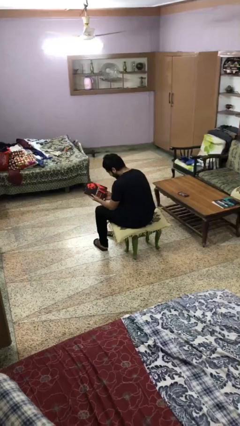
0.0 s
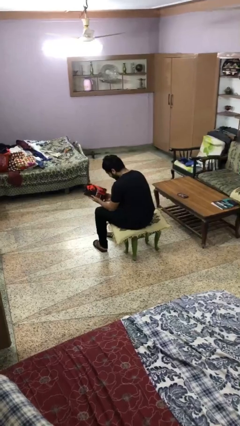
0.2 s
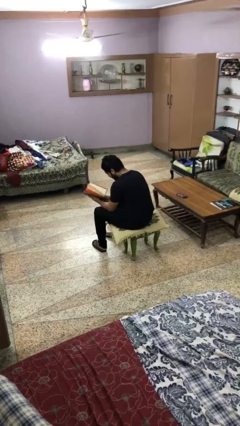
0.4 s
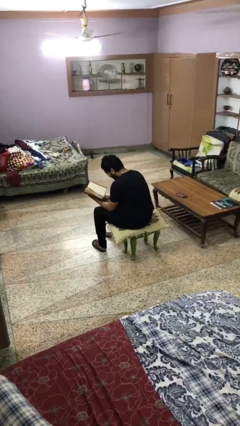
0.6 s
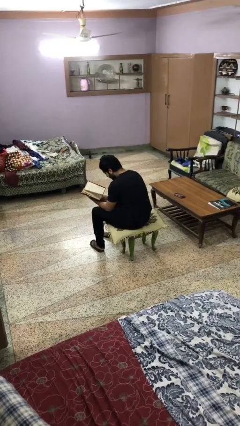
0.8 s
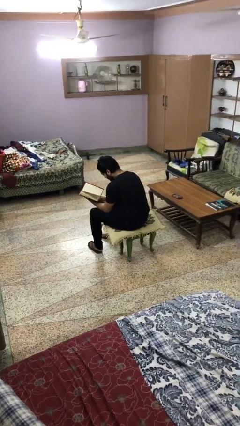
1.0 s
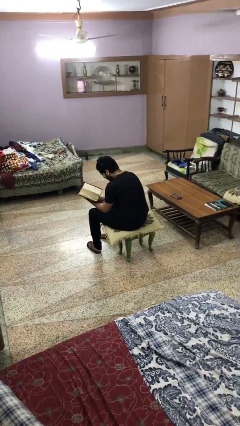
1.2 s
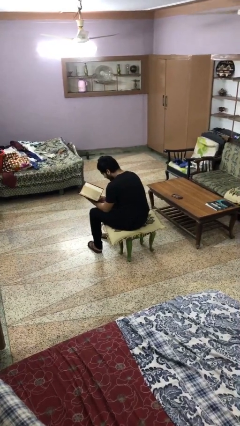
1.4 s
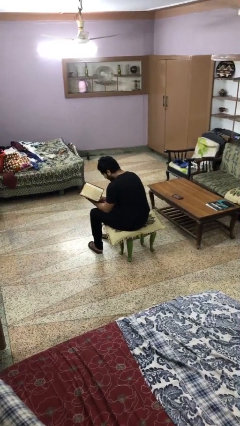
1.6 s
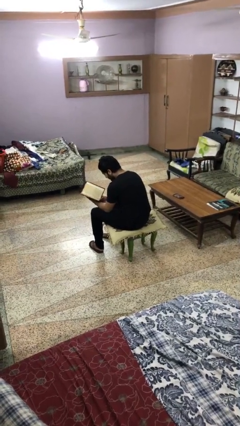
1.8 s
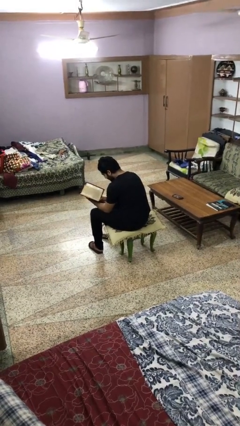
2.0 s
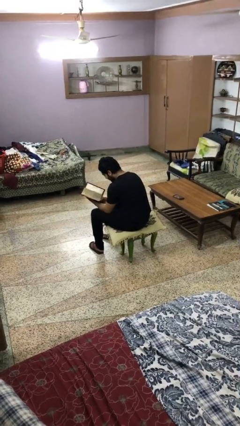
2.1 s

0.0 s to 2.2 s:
person reads magazine

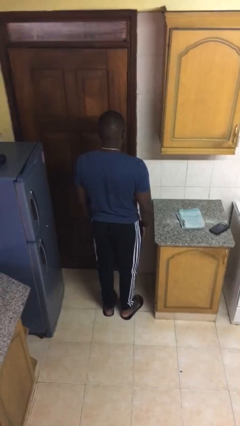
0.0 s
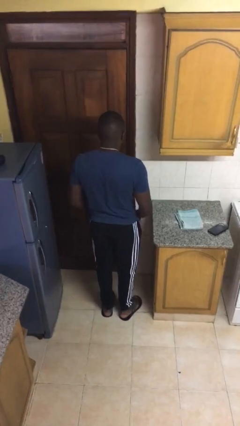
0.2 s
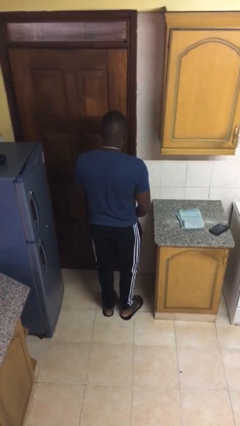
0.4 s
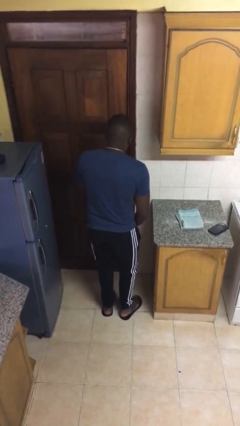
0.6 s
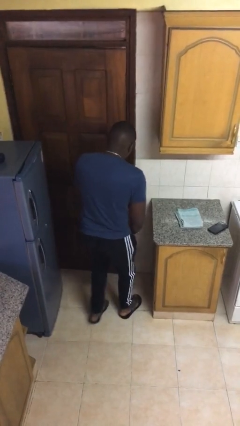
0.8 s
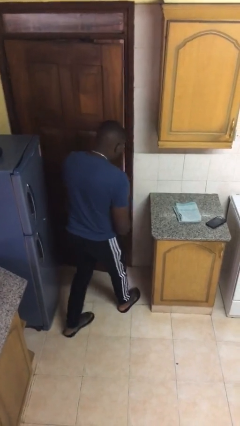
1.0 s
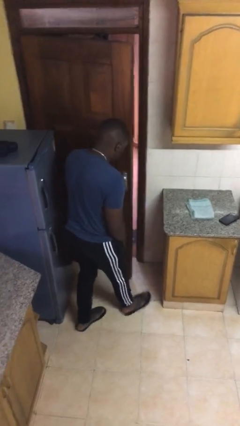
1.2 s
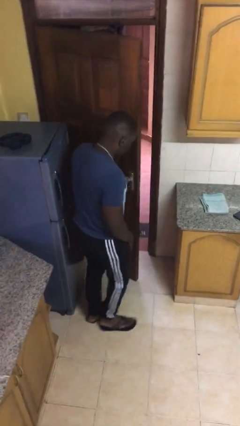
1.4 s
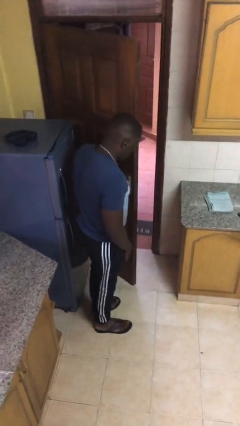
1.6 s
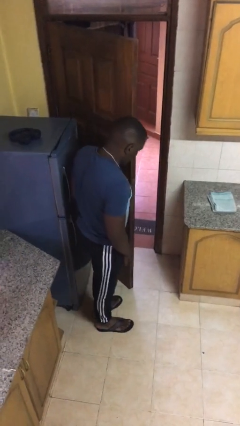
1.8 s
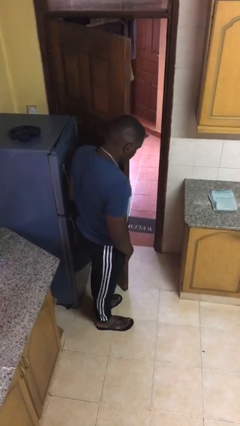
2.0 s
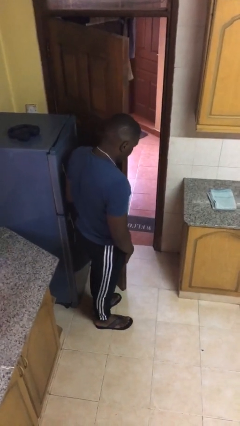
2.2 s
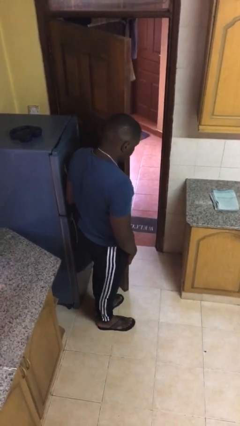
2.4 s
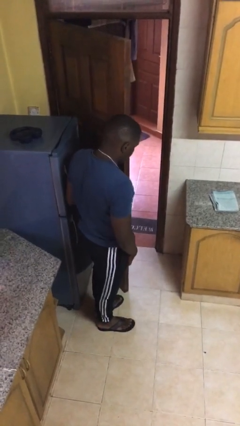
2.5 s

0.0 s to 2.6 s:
person opens facility door

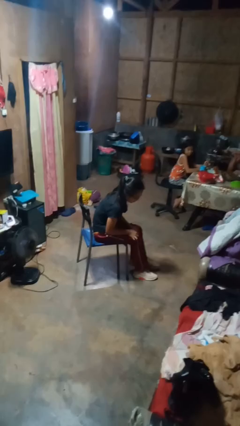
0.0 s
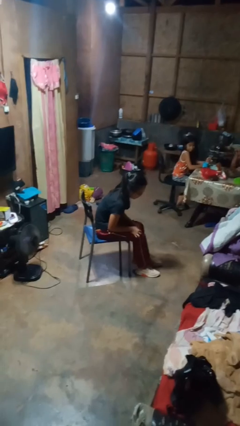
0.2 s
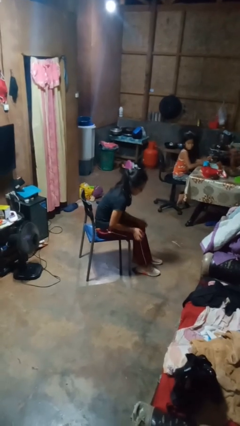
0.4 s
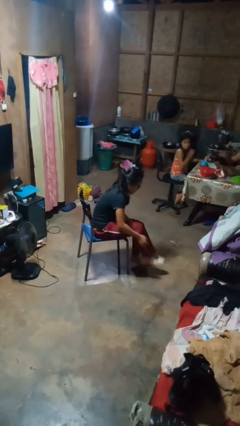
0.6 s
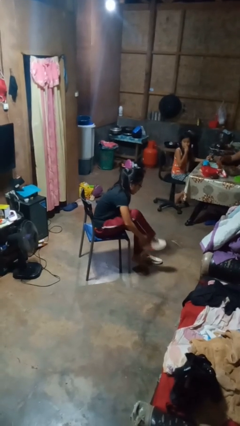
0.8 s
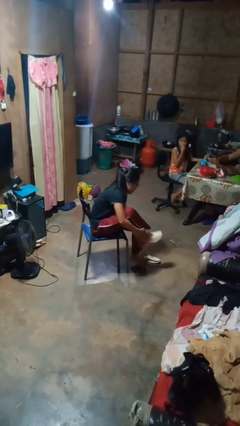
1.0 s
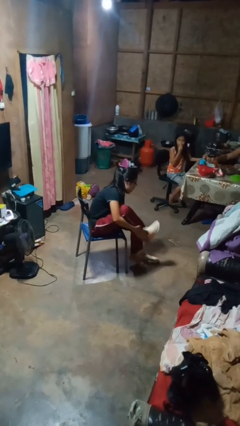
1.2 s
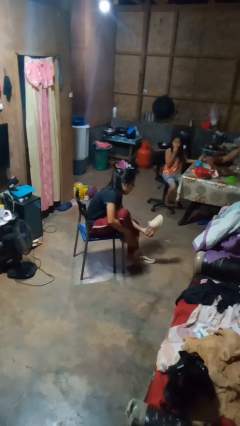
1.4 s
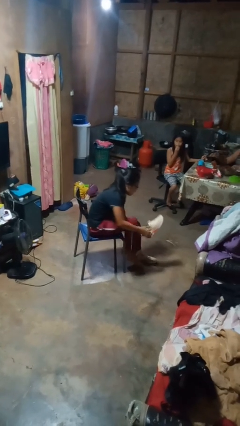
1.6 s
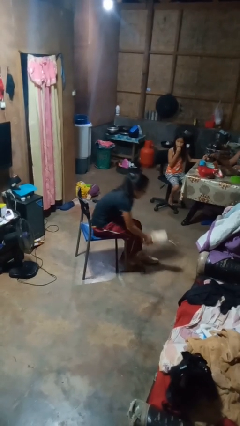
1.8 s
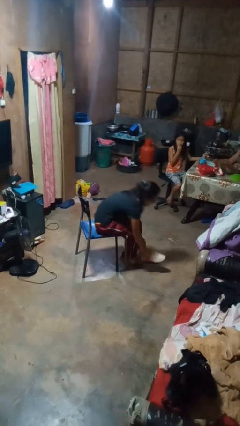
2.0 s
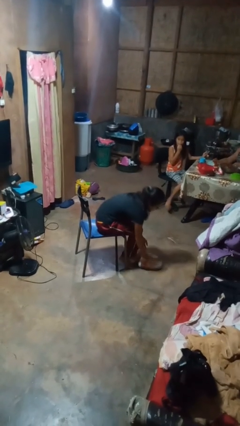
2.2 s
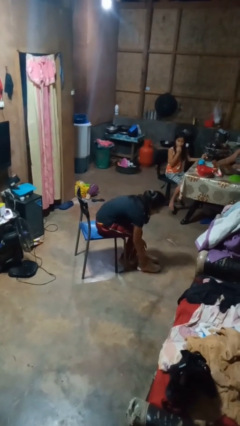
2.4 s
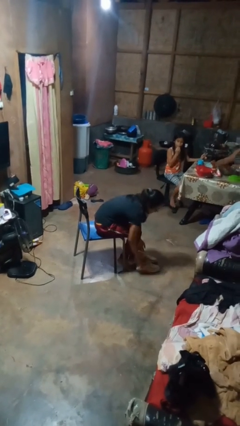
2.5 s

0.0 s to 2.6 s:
person takes off shoes

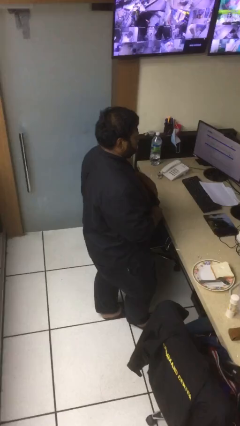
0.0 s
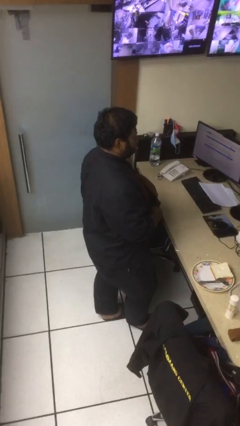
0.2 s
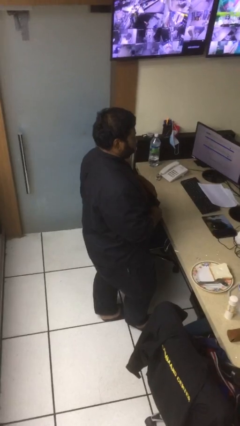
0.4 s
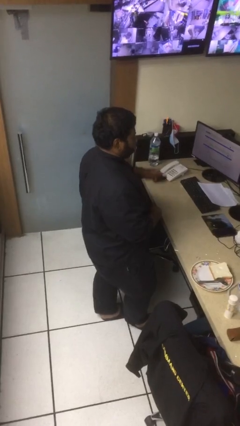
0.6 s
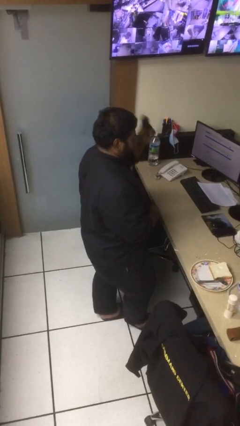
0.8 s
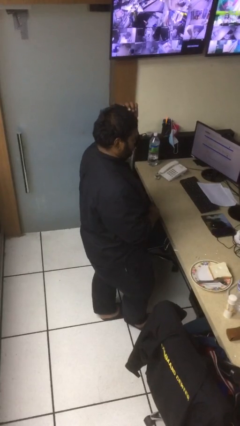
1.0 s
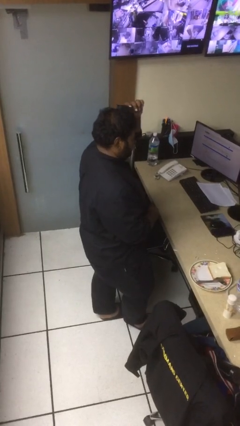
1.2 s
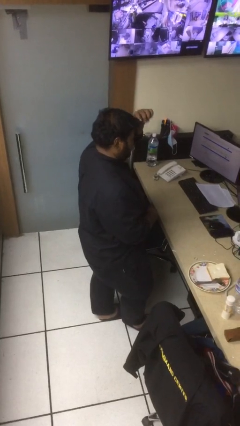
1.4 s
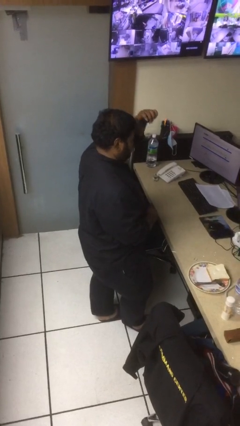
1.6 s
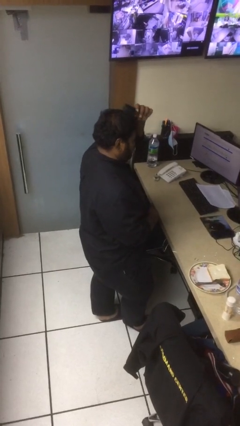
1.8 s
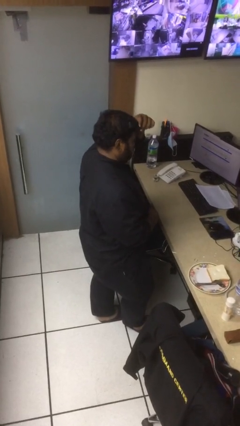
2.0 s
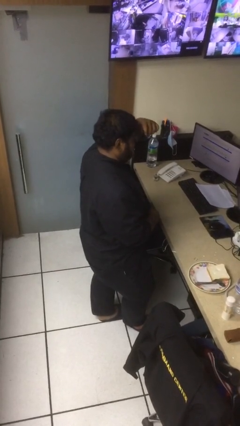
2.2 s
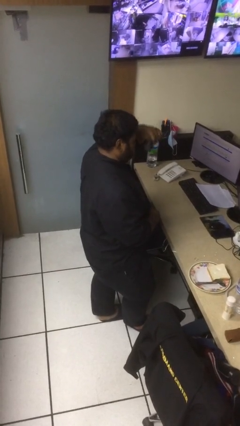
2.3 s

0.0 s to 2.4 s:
person brushes hair

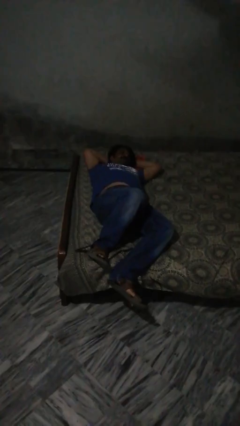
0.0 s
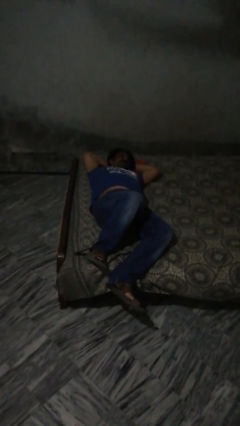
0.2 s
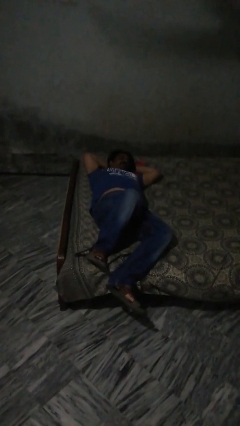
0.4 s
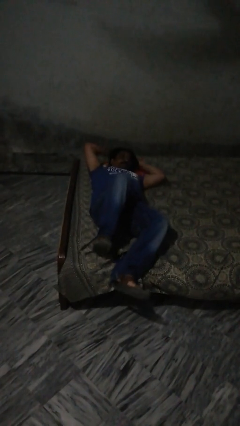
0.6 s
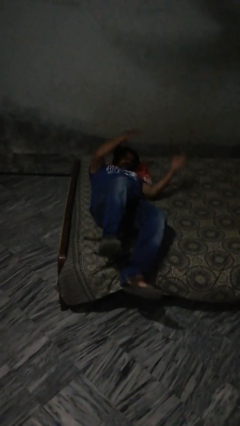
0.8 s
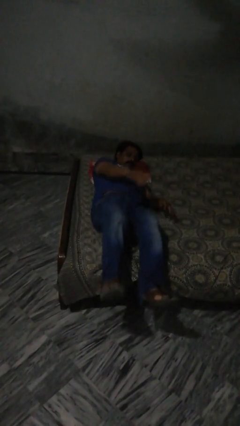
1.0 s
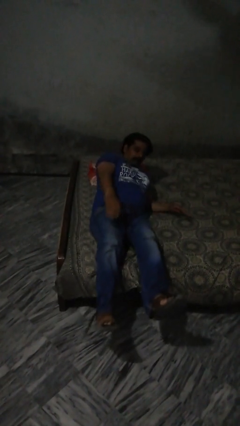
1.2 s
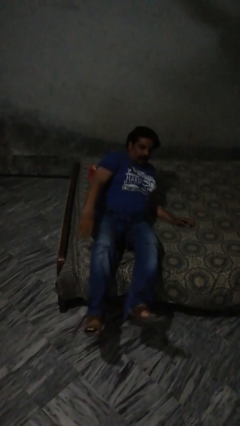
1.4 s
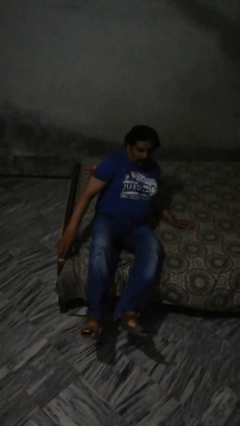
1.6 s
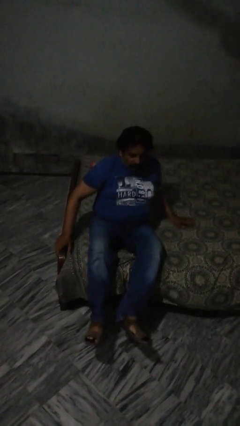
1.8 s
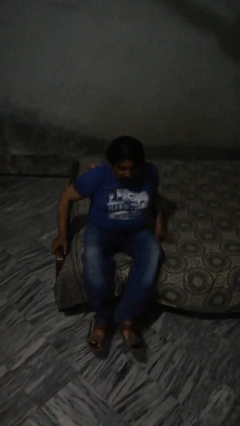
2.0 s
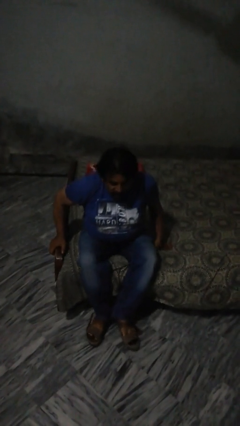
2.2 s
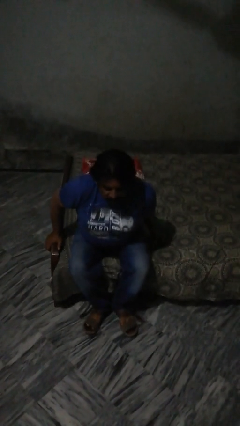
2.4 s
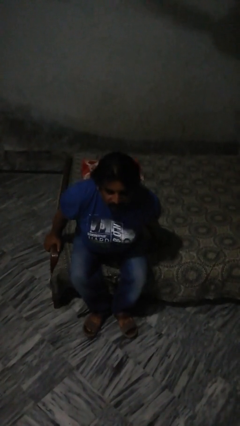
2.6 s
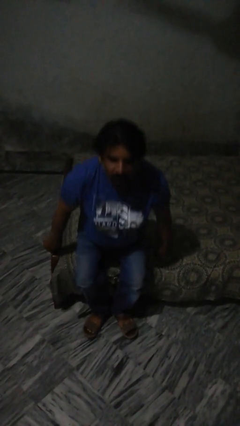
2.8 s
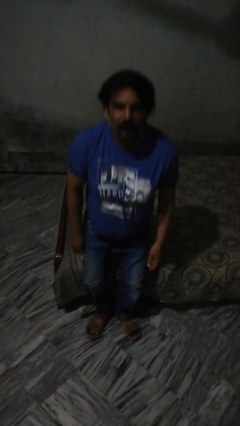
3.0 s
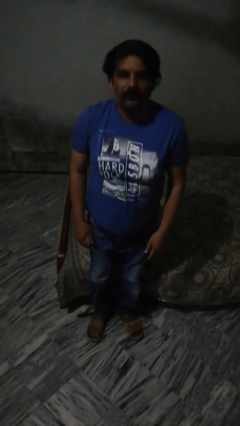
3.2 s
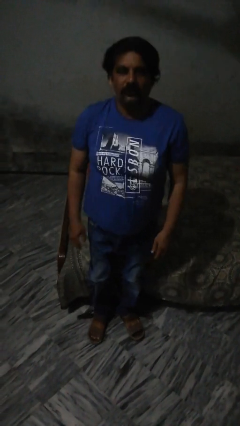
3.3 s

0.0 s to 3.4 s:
person stands up

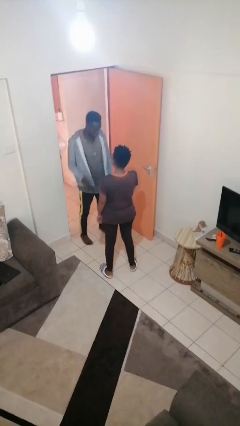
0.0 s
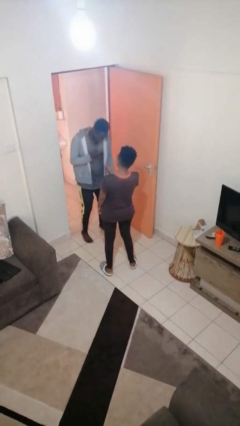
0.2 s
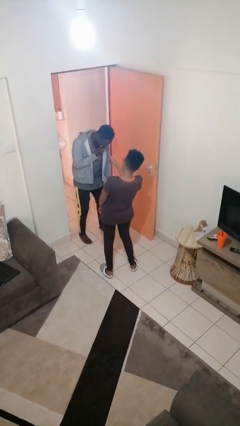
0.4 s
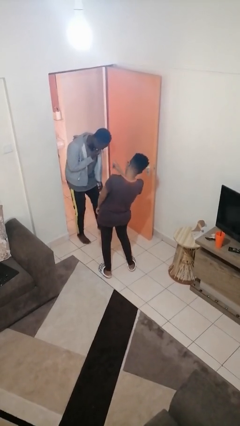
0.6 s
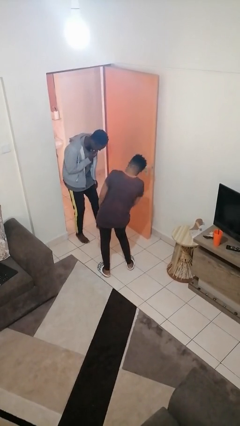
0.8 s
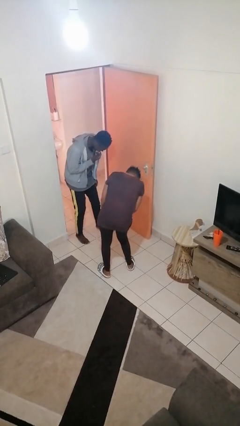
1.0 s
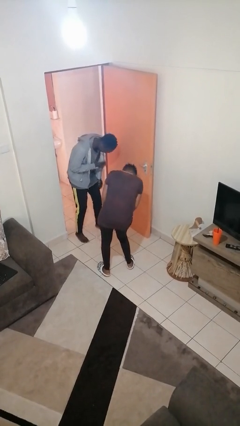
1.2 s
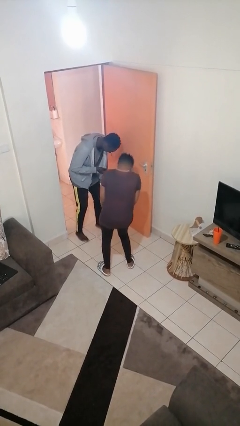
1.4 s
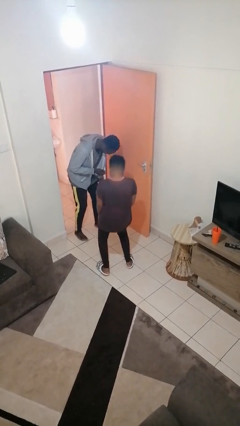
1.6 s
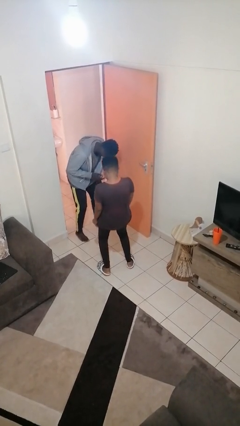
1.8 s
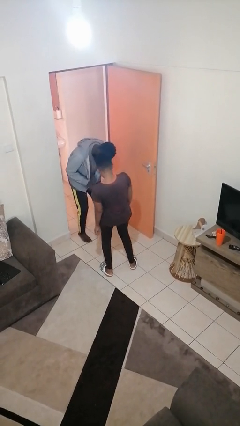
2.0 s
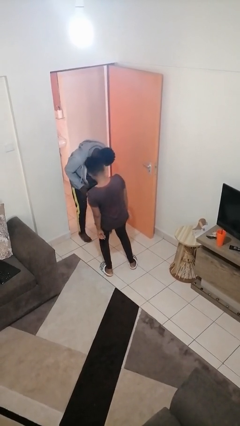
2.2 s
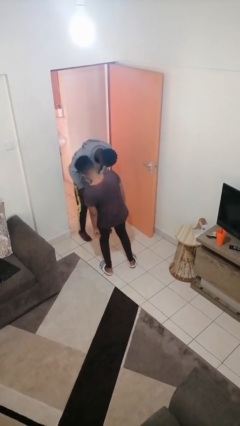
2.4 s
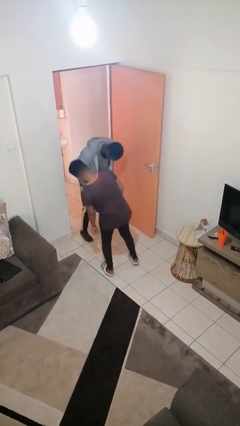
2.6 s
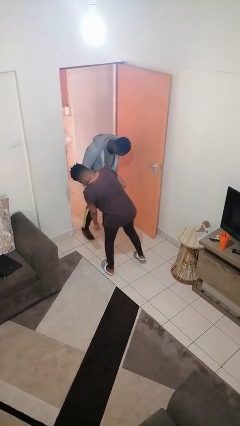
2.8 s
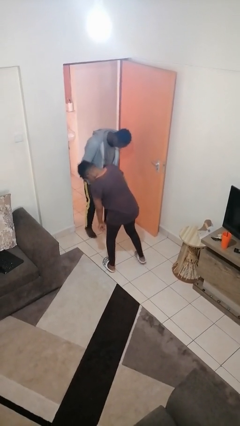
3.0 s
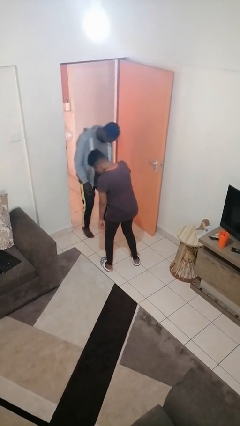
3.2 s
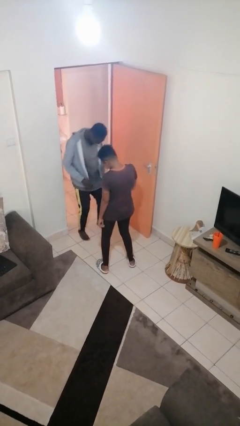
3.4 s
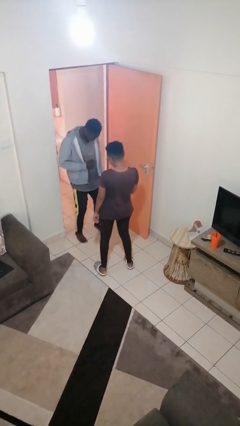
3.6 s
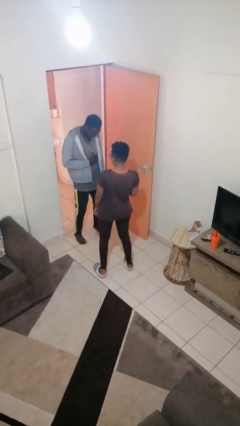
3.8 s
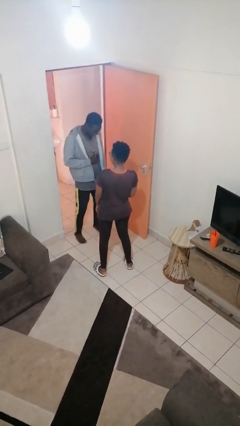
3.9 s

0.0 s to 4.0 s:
person laughs with person

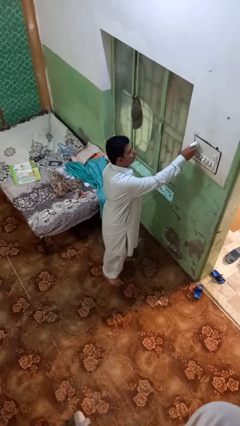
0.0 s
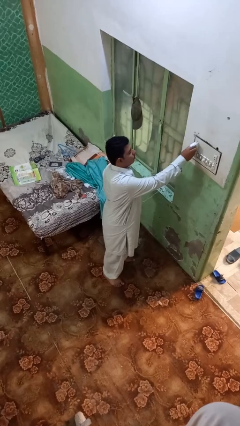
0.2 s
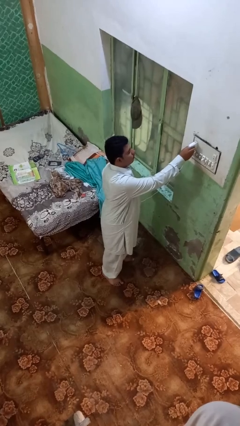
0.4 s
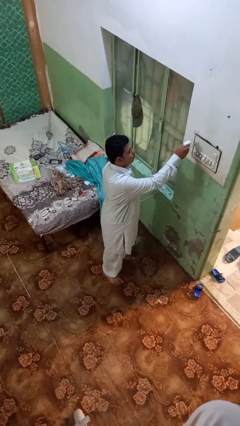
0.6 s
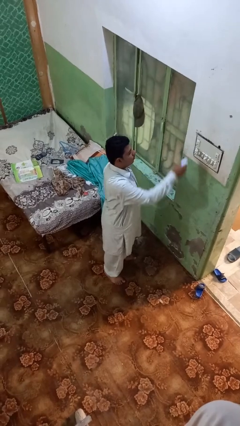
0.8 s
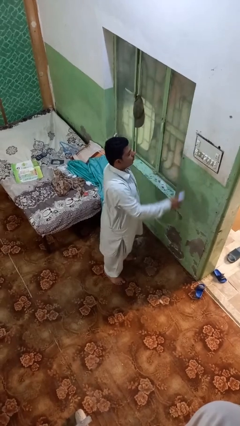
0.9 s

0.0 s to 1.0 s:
person unplugs from electrical socket
